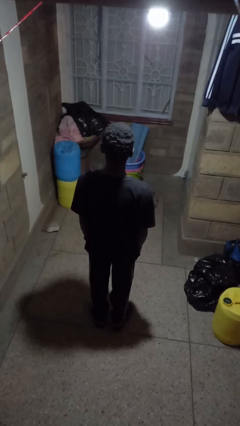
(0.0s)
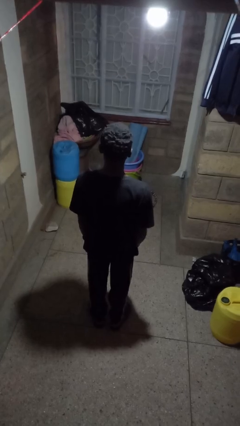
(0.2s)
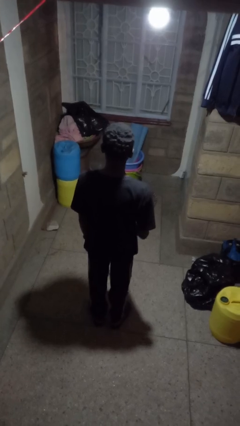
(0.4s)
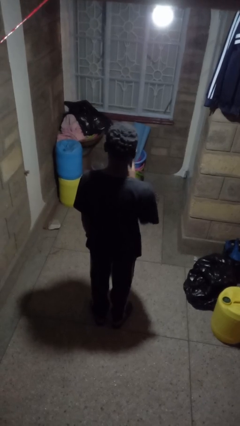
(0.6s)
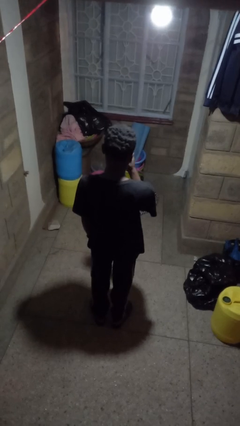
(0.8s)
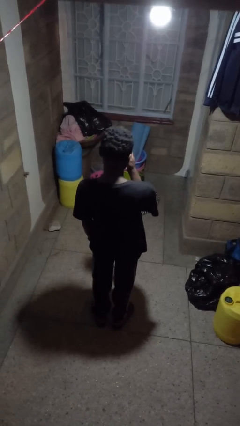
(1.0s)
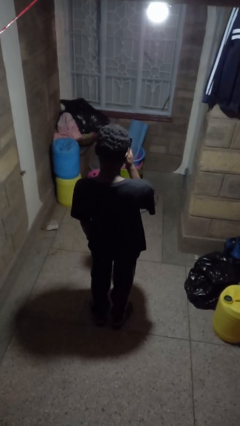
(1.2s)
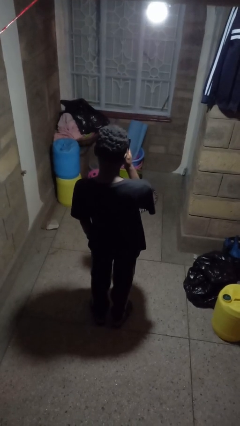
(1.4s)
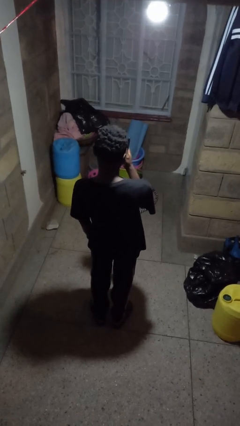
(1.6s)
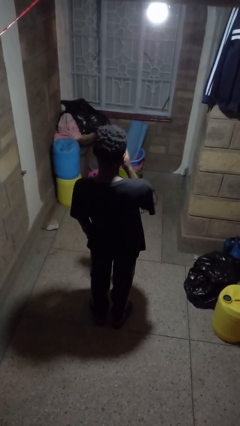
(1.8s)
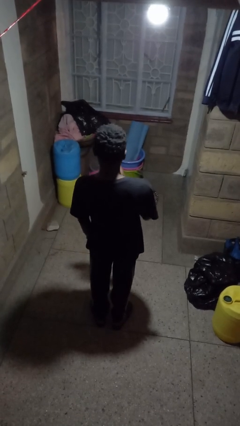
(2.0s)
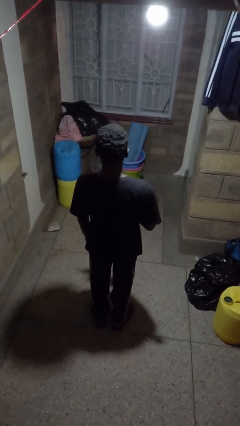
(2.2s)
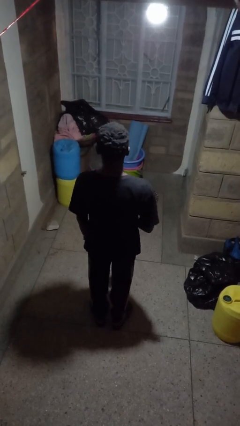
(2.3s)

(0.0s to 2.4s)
person takes selfie

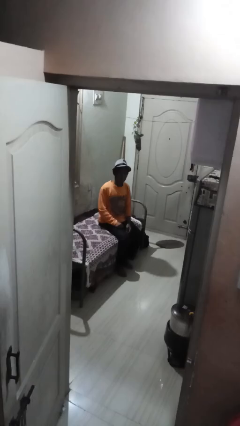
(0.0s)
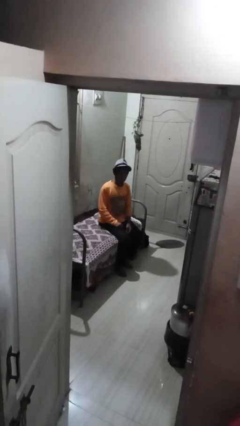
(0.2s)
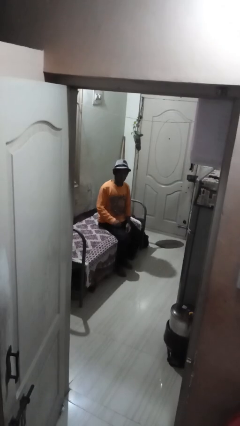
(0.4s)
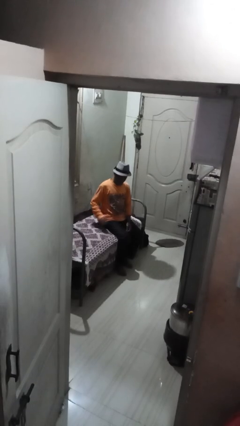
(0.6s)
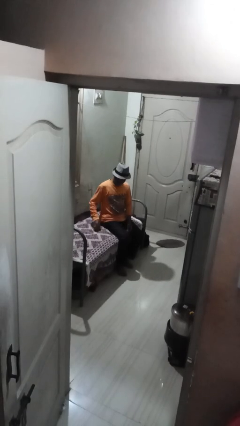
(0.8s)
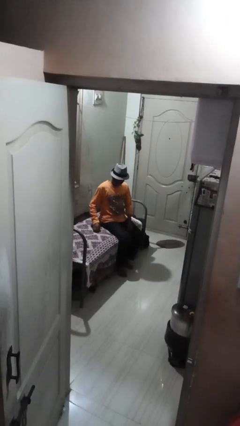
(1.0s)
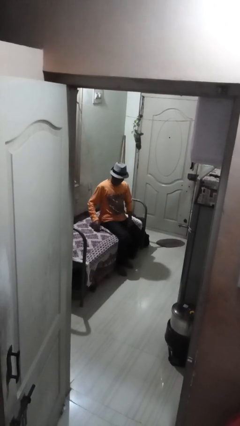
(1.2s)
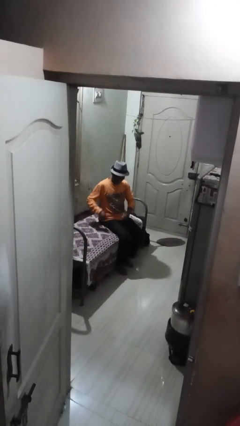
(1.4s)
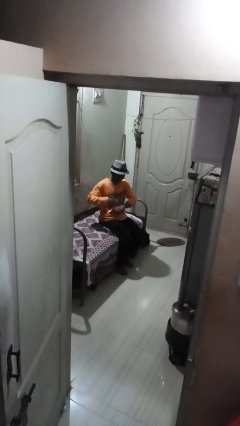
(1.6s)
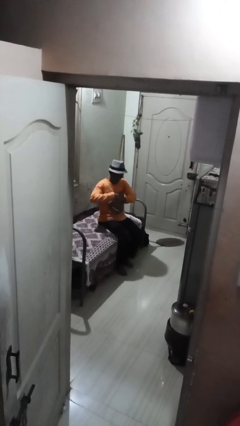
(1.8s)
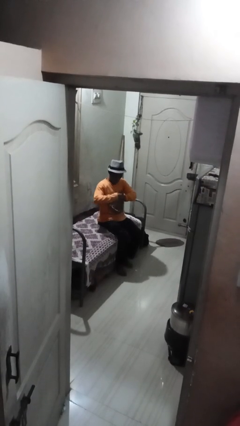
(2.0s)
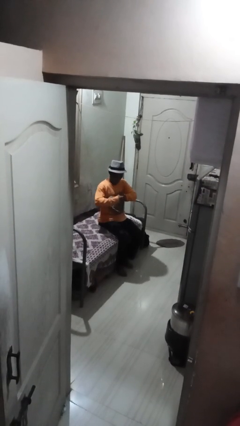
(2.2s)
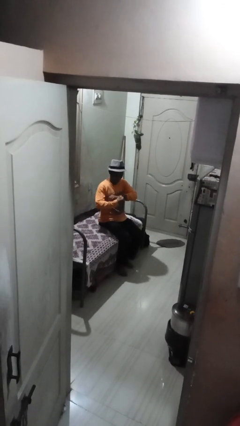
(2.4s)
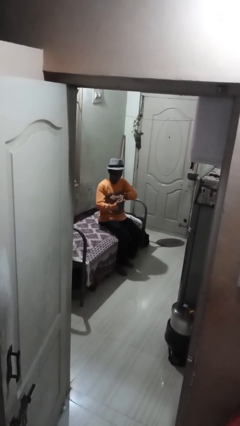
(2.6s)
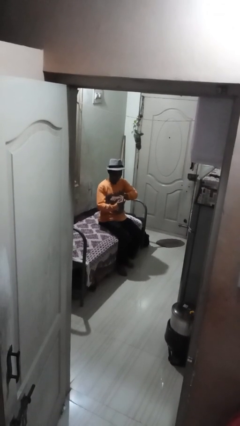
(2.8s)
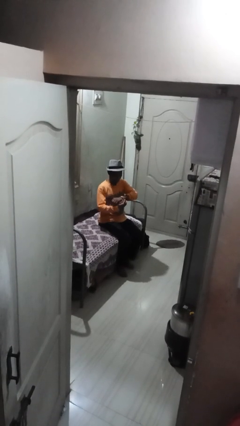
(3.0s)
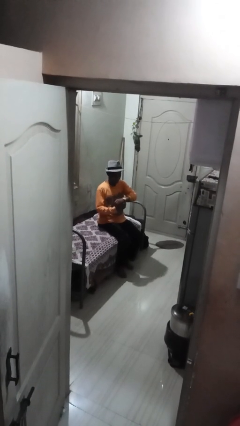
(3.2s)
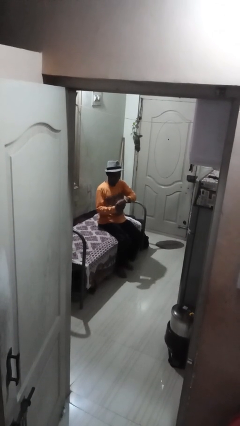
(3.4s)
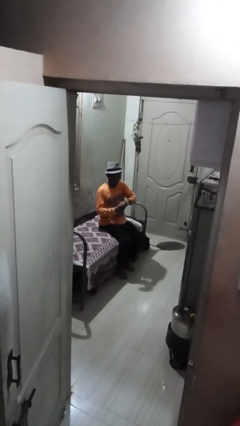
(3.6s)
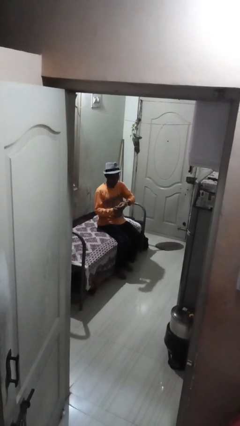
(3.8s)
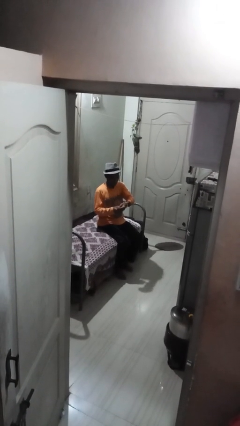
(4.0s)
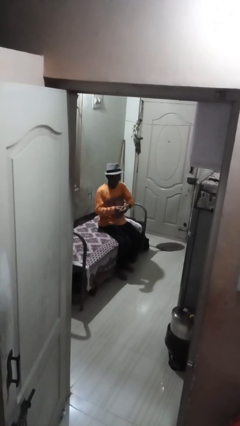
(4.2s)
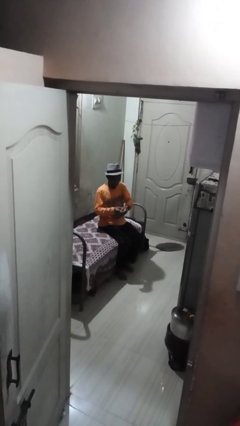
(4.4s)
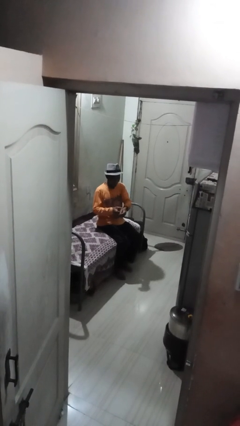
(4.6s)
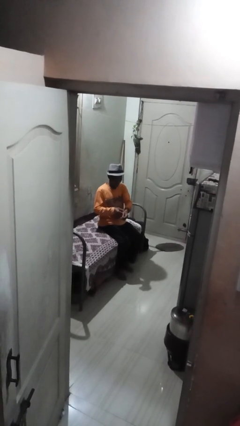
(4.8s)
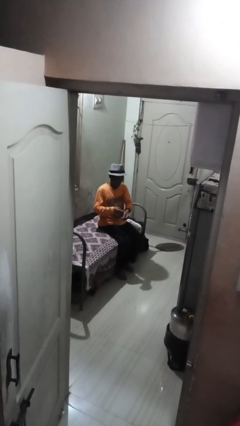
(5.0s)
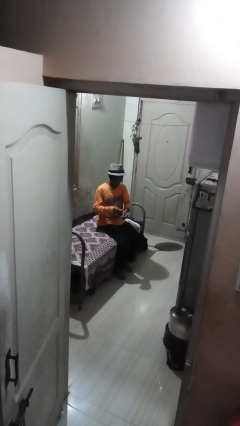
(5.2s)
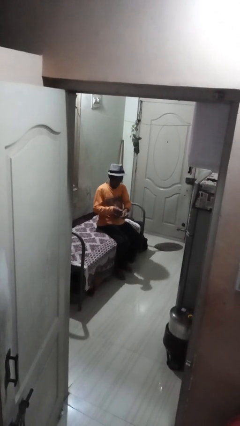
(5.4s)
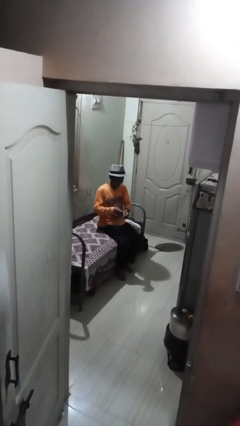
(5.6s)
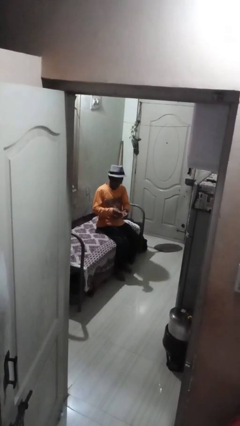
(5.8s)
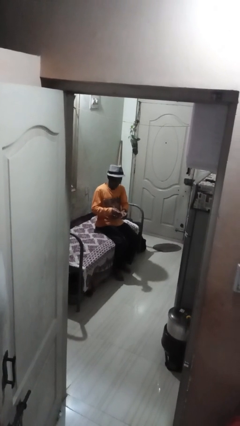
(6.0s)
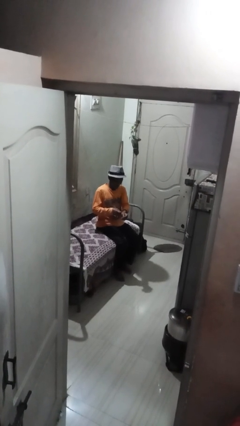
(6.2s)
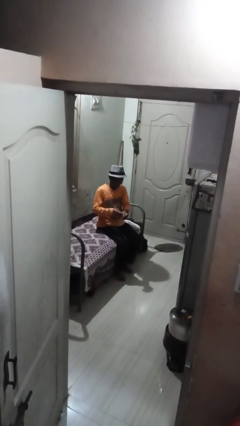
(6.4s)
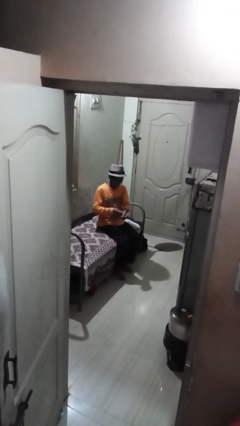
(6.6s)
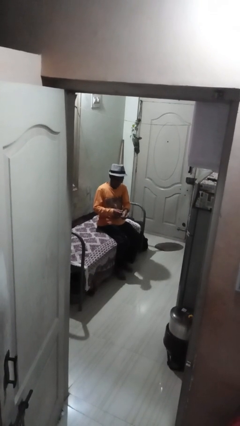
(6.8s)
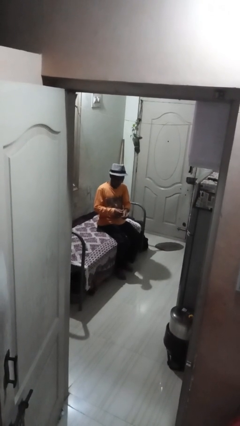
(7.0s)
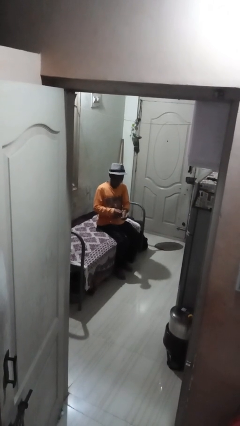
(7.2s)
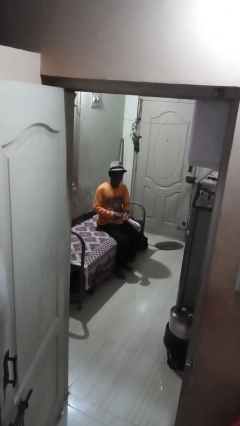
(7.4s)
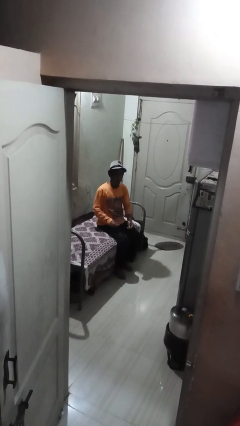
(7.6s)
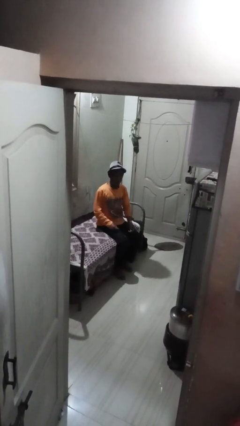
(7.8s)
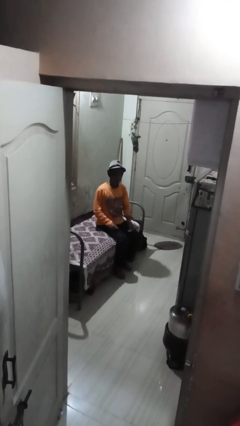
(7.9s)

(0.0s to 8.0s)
person puts on wristwatch

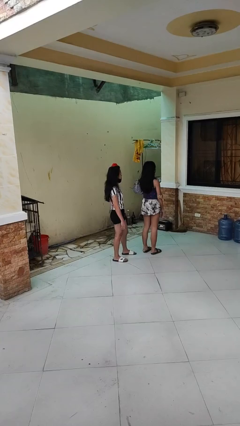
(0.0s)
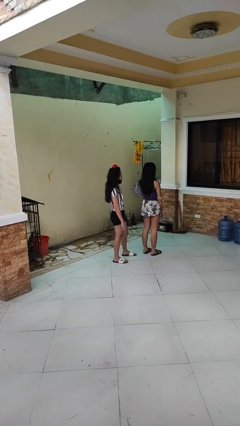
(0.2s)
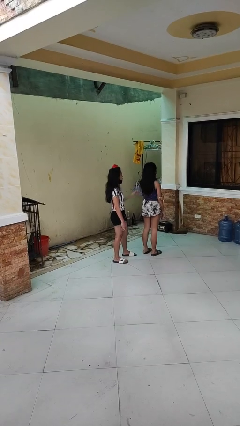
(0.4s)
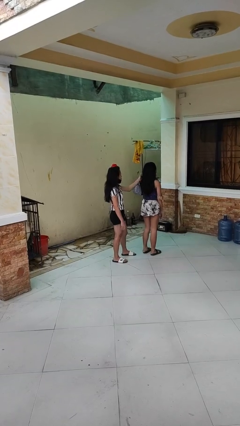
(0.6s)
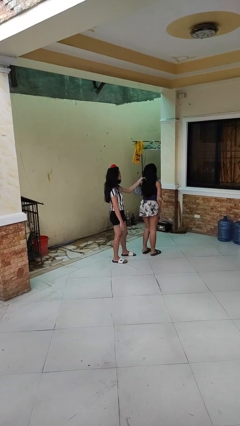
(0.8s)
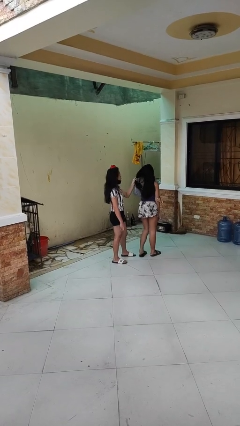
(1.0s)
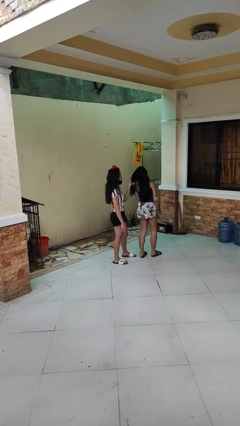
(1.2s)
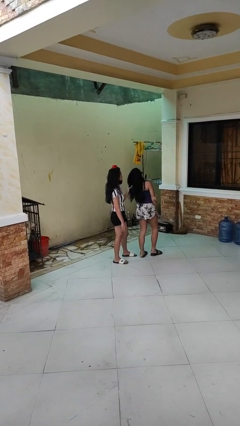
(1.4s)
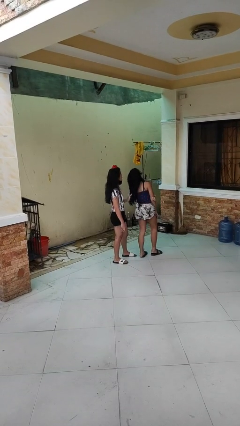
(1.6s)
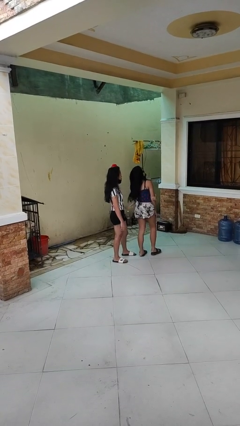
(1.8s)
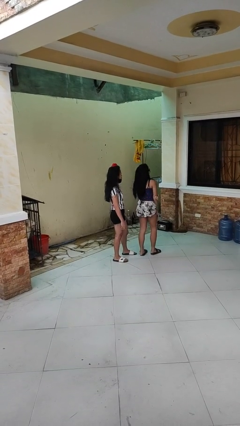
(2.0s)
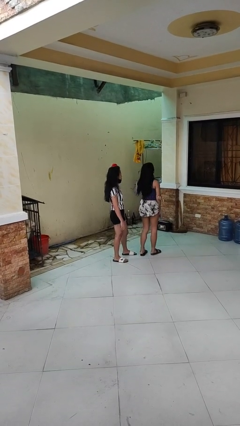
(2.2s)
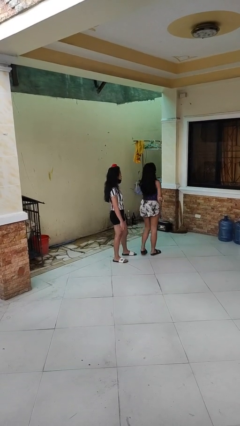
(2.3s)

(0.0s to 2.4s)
person grabs person by hair

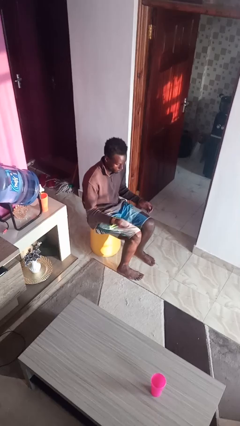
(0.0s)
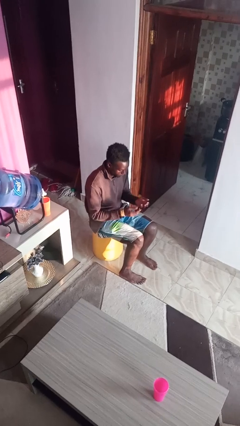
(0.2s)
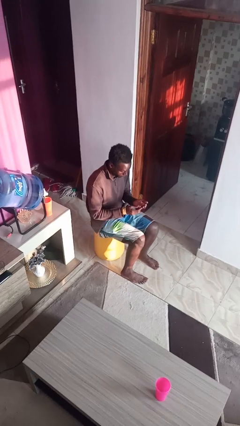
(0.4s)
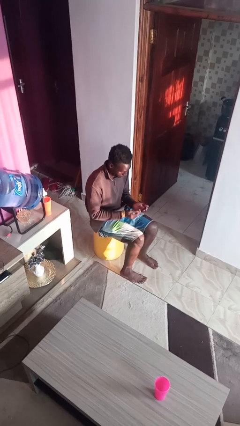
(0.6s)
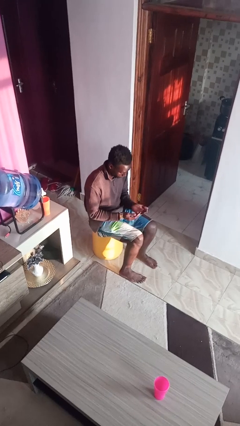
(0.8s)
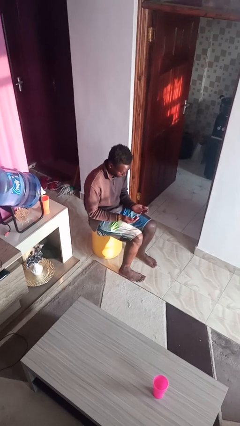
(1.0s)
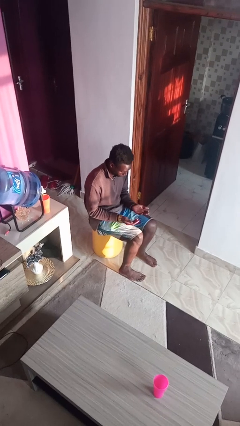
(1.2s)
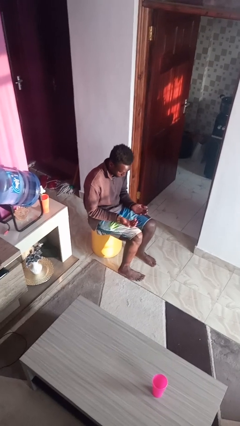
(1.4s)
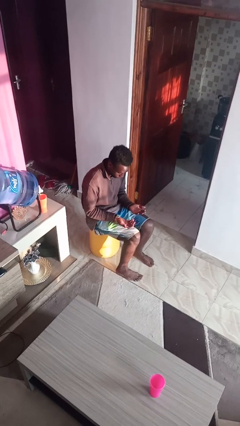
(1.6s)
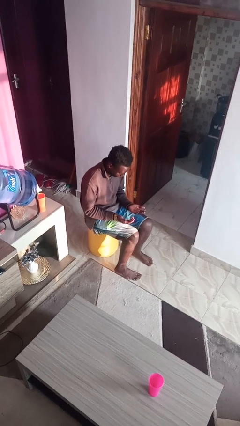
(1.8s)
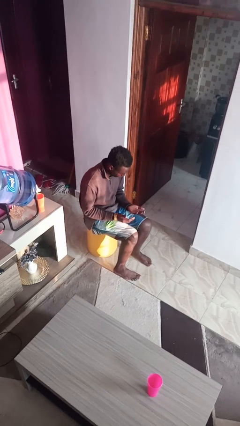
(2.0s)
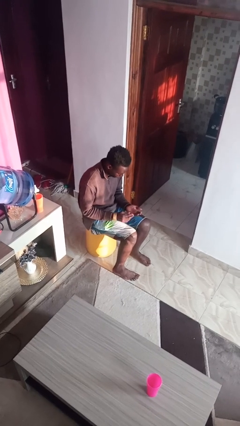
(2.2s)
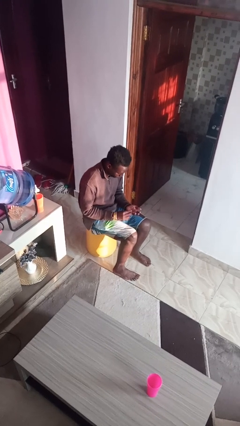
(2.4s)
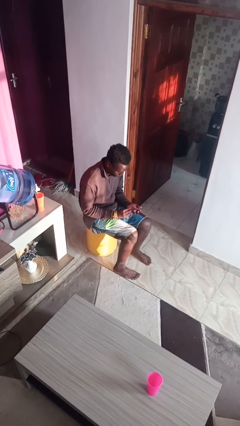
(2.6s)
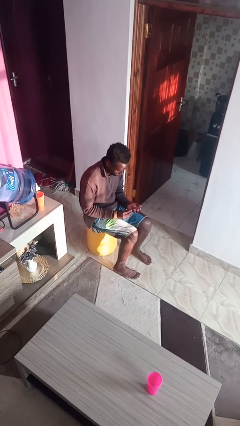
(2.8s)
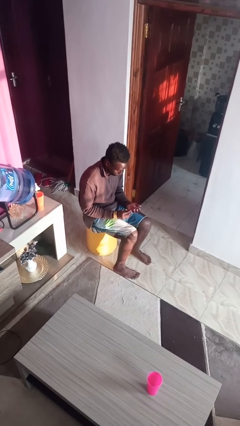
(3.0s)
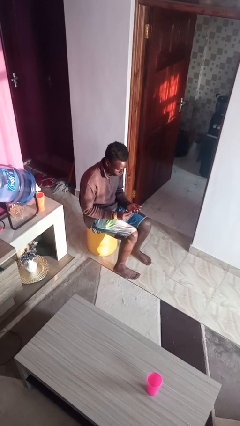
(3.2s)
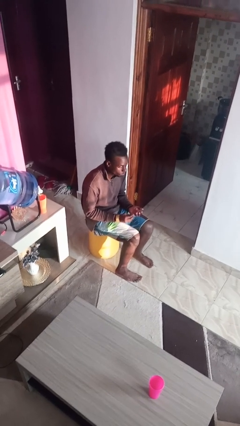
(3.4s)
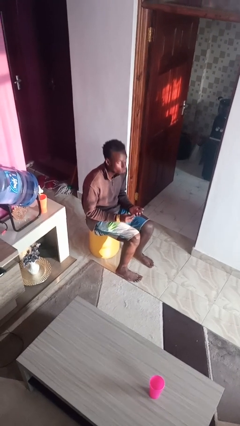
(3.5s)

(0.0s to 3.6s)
person looks at hands in lap

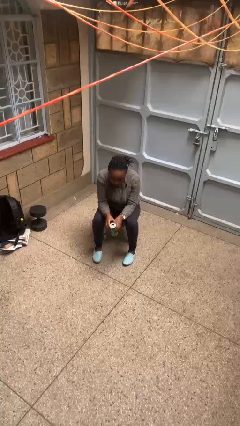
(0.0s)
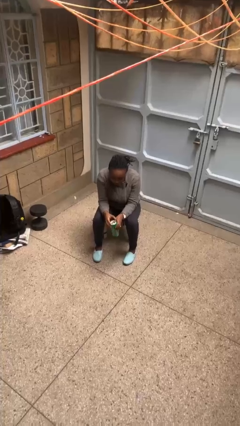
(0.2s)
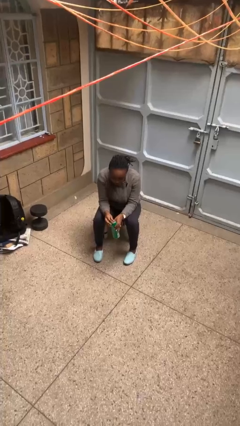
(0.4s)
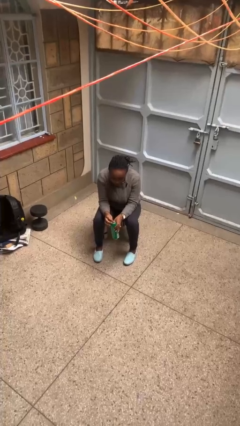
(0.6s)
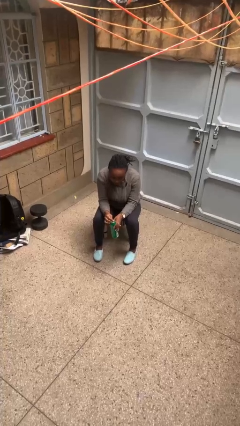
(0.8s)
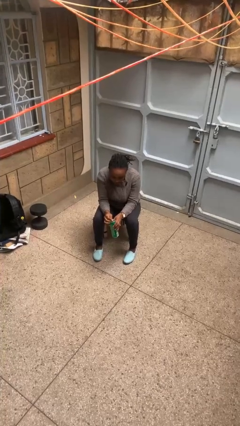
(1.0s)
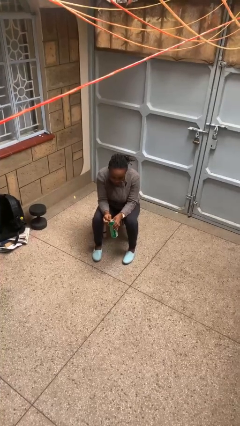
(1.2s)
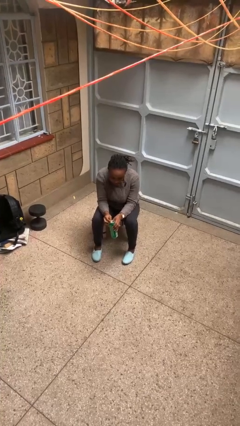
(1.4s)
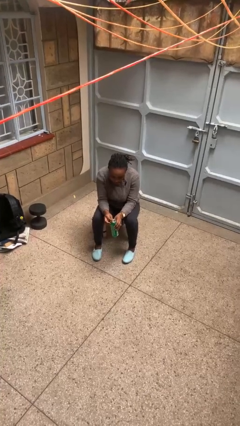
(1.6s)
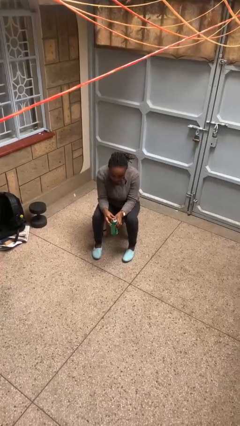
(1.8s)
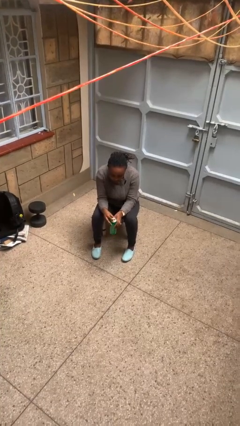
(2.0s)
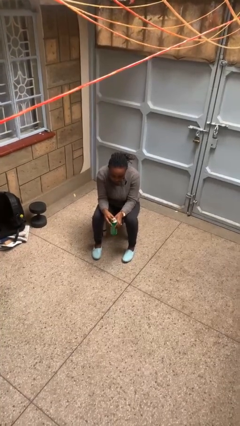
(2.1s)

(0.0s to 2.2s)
person opens beverage can
